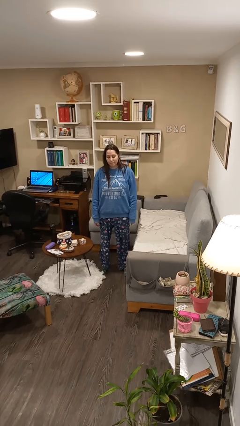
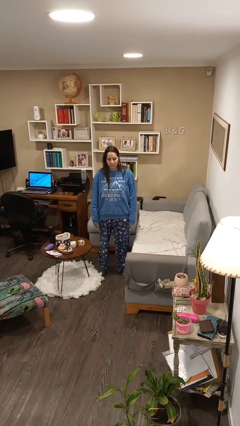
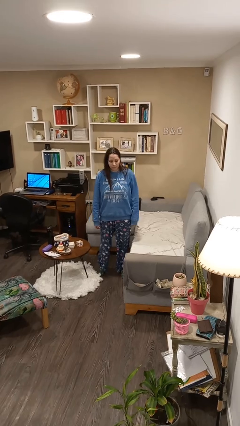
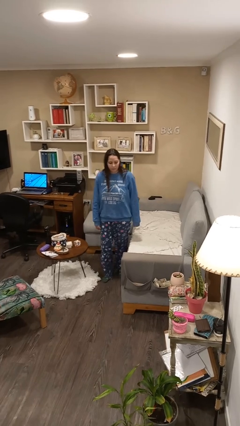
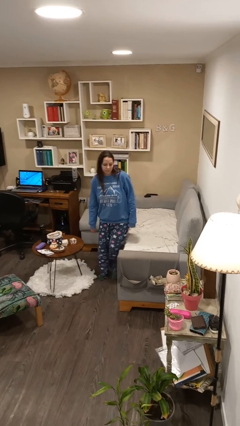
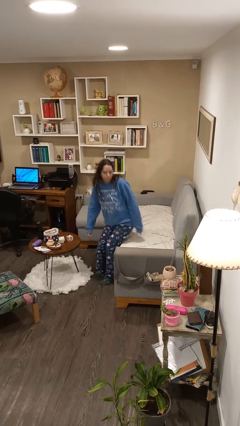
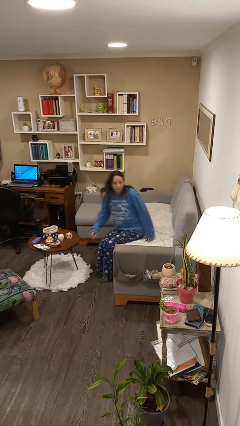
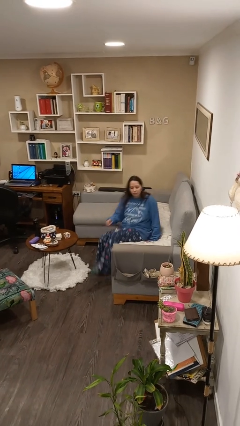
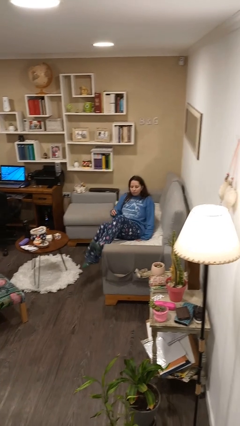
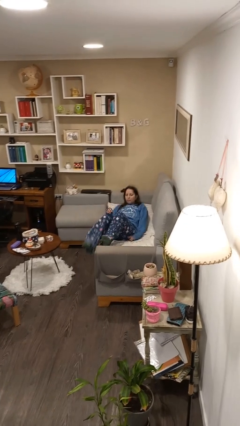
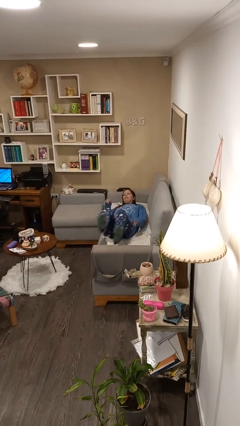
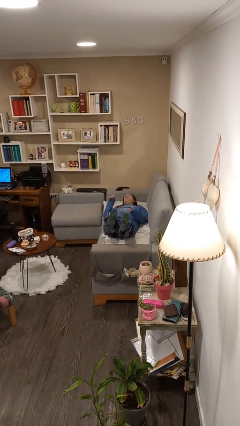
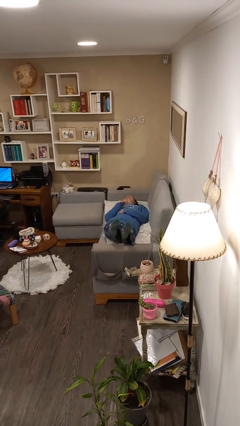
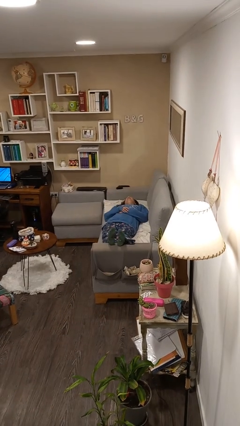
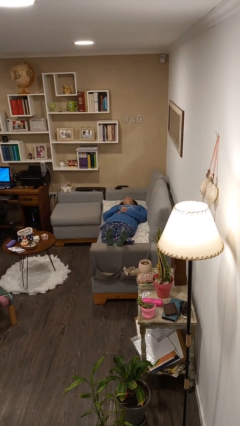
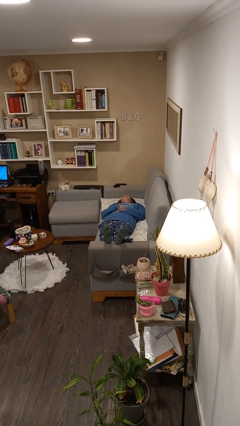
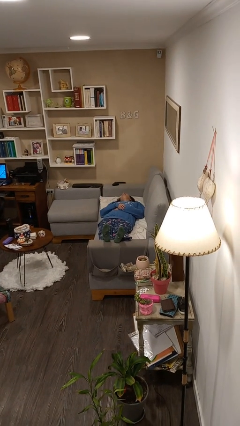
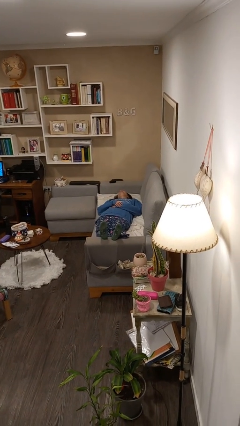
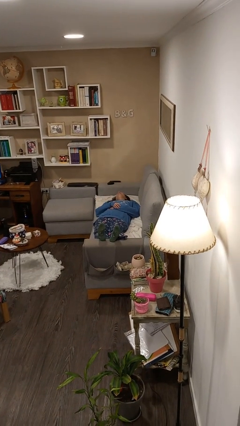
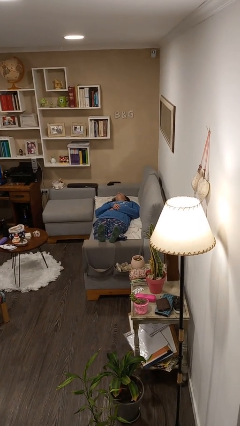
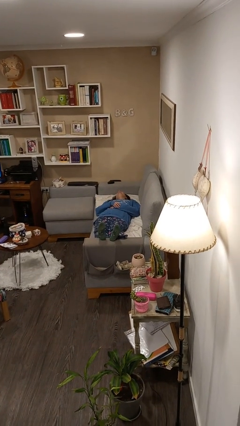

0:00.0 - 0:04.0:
person lies down on couch

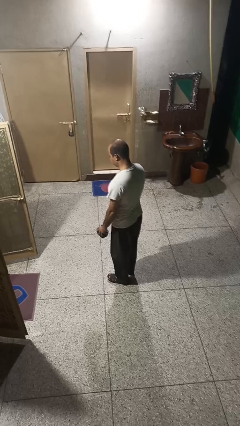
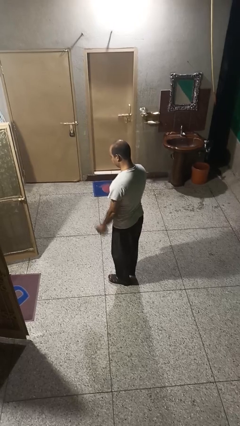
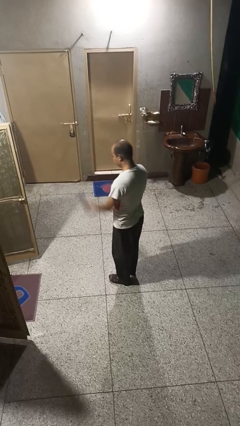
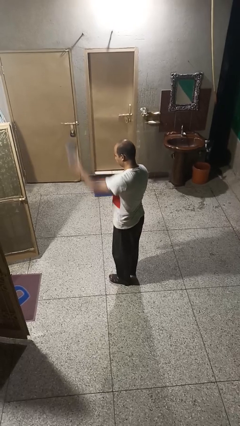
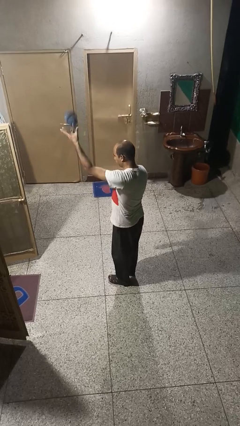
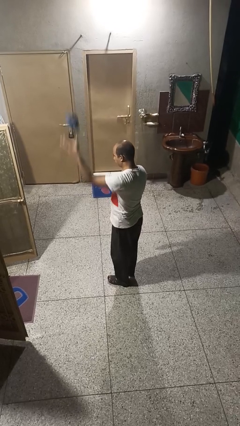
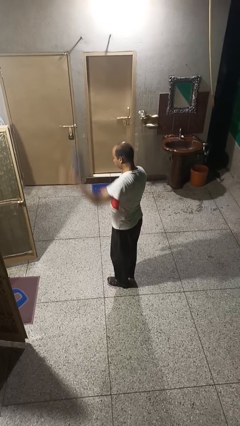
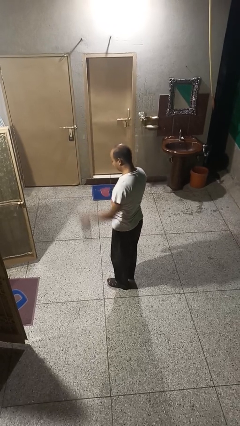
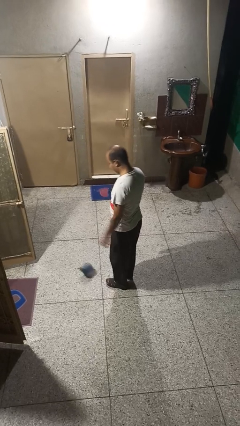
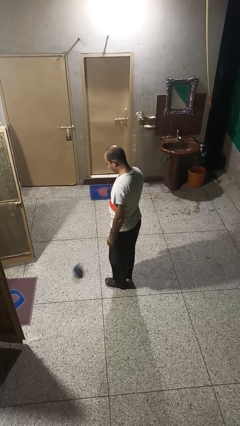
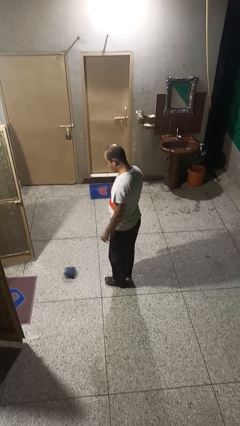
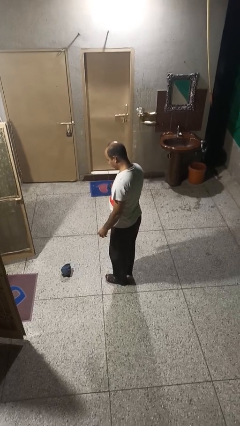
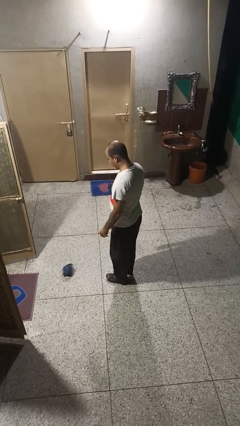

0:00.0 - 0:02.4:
person throws object into air

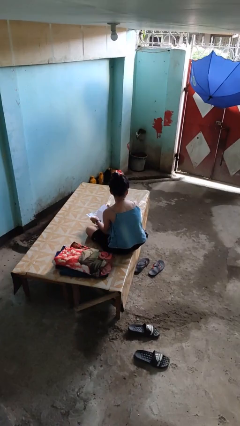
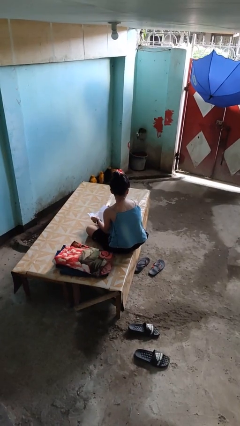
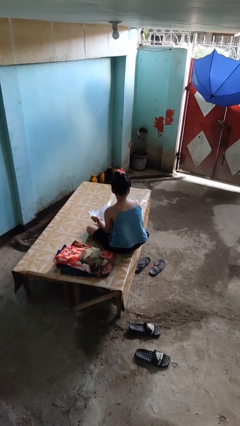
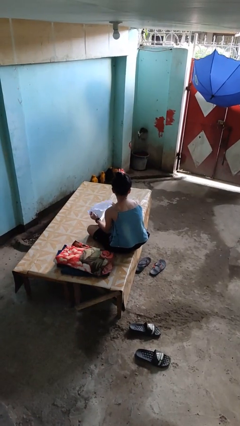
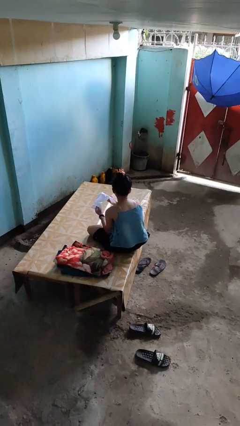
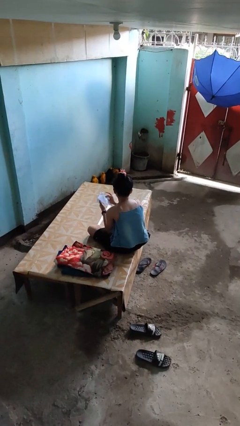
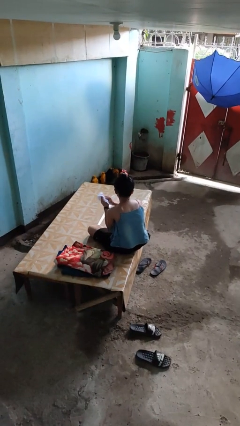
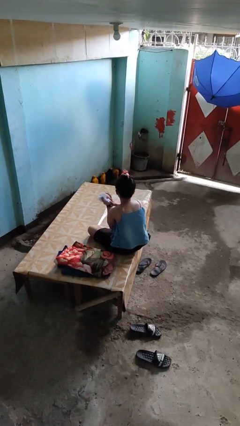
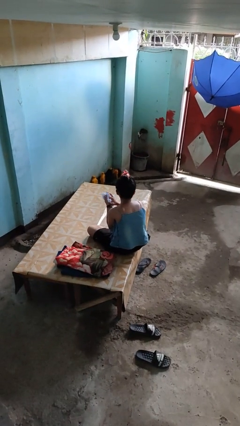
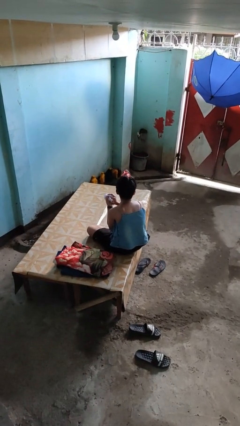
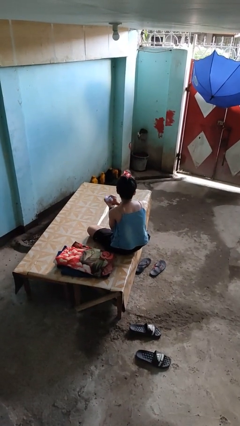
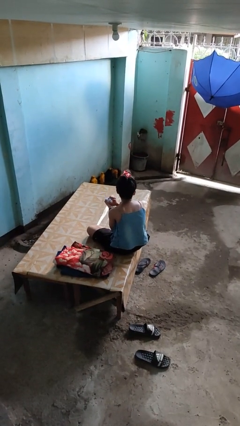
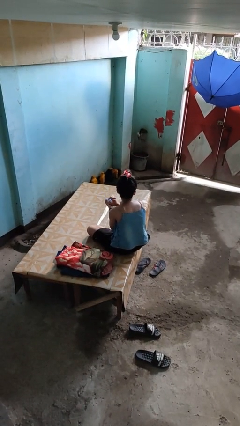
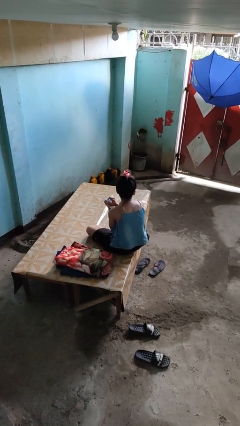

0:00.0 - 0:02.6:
person crumples paper

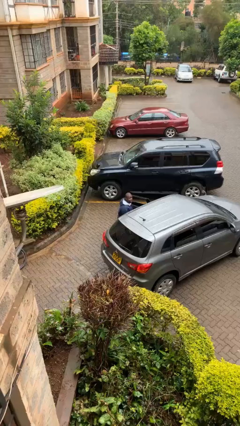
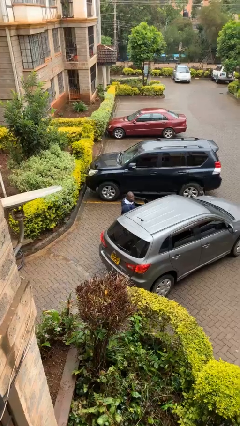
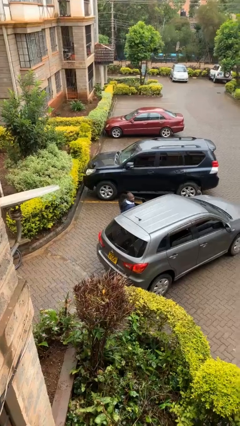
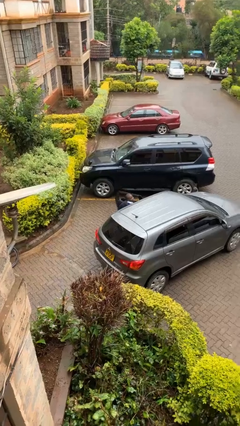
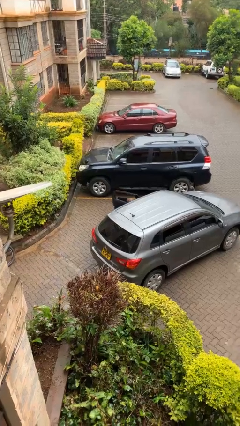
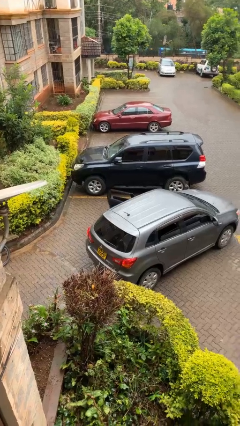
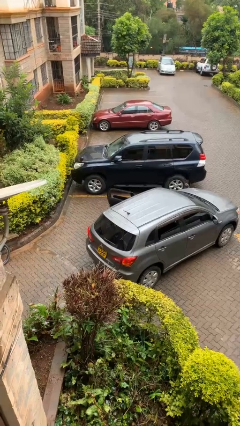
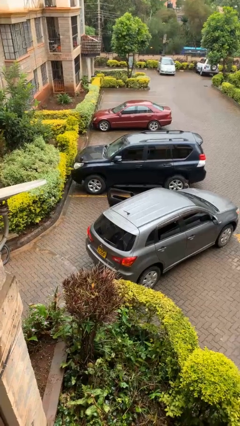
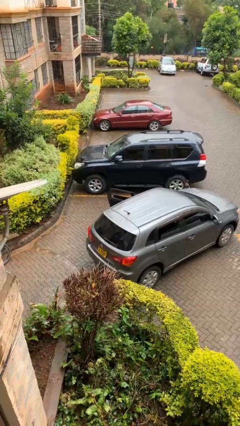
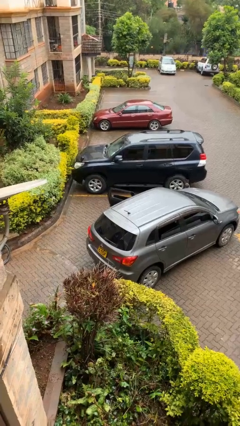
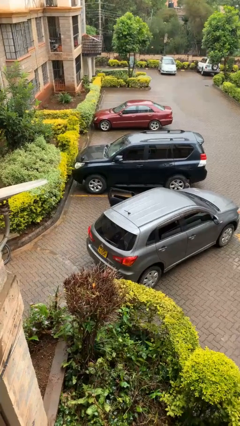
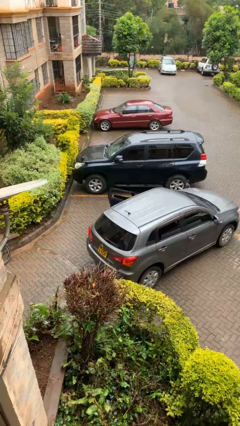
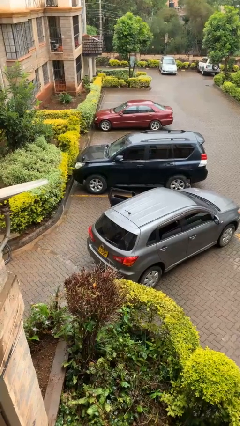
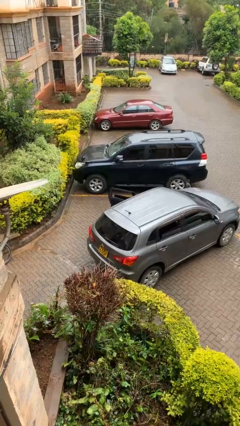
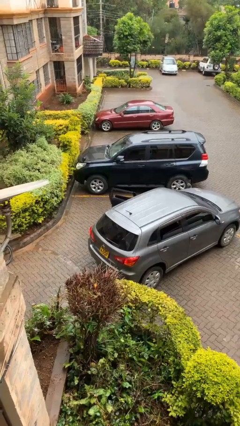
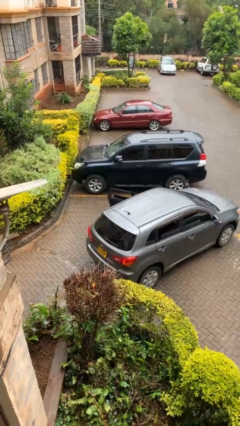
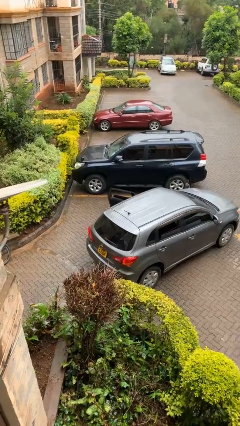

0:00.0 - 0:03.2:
person enters car

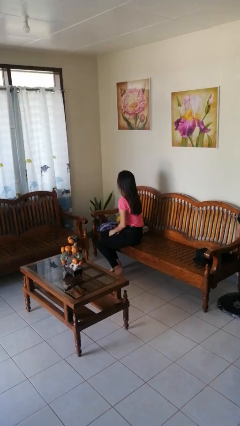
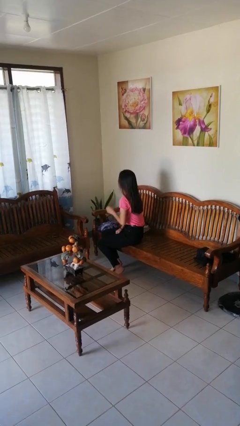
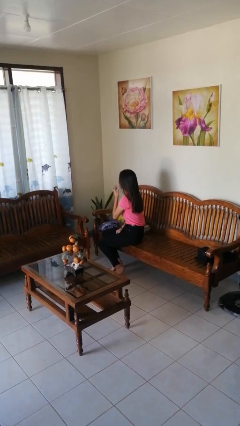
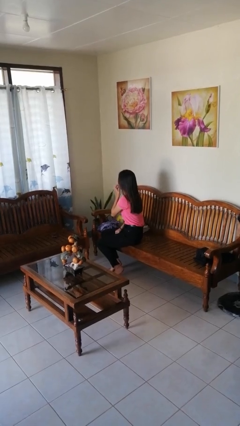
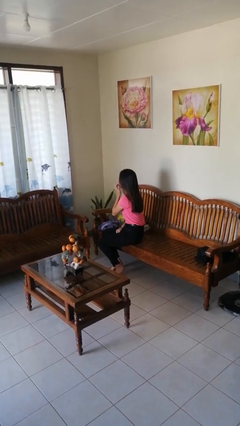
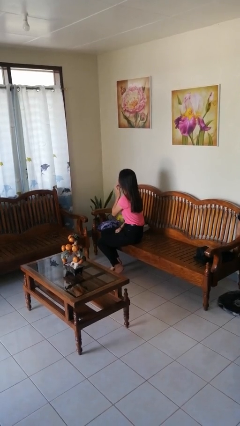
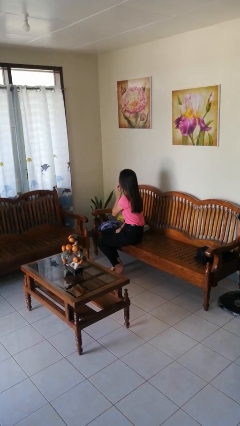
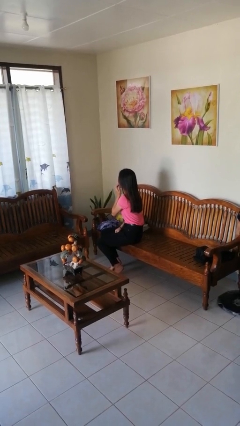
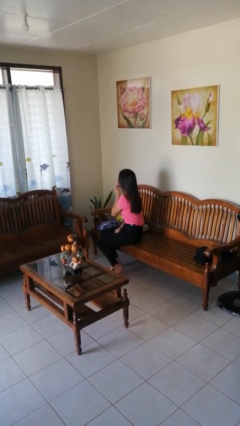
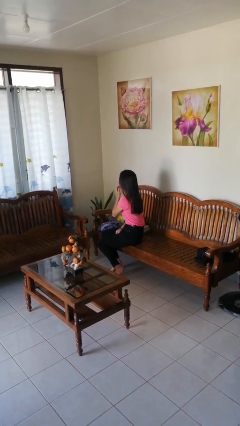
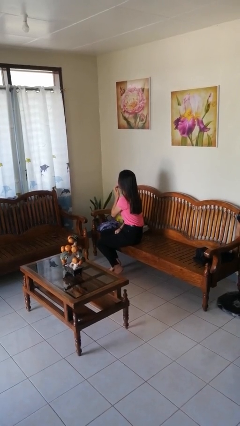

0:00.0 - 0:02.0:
person licks fingers

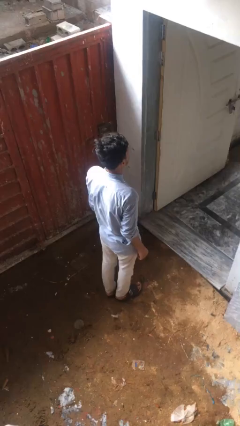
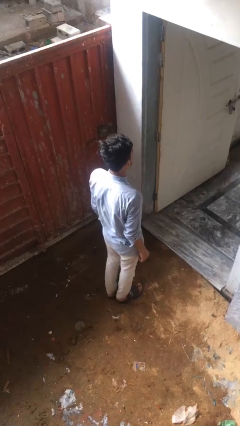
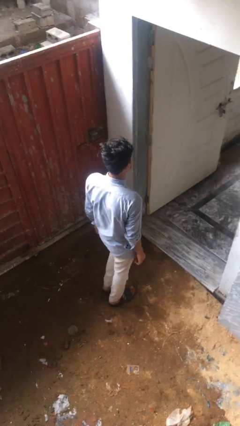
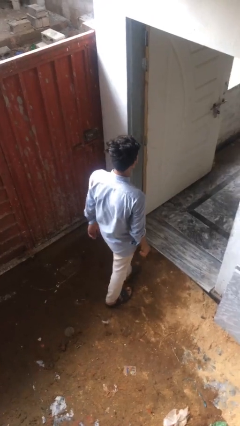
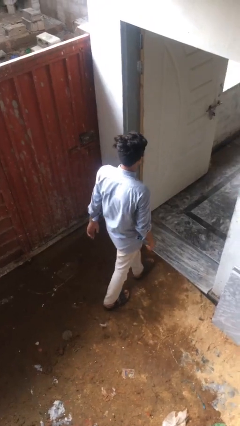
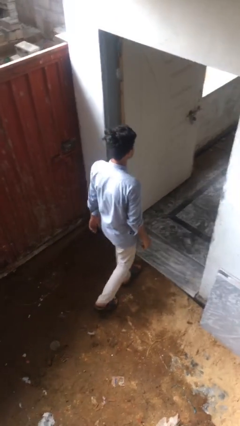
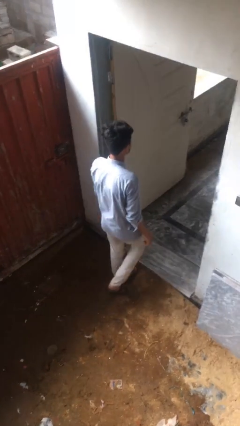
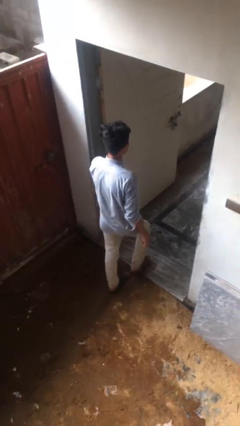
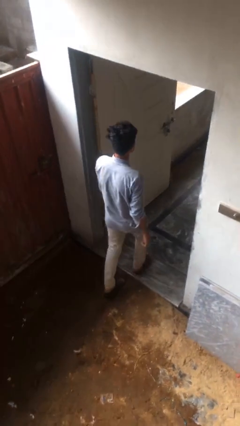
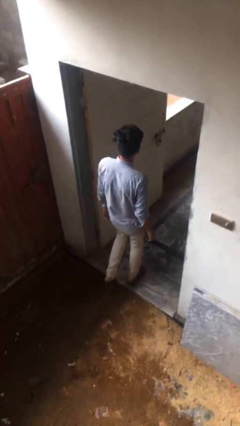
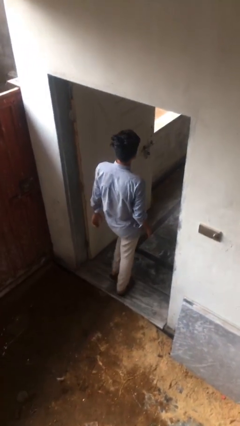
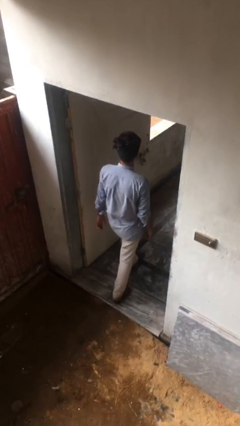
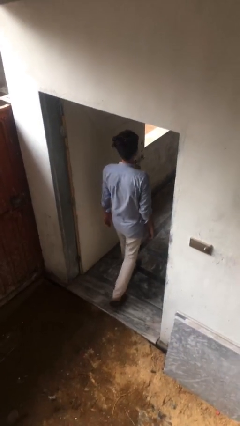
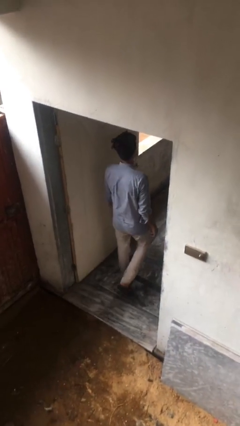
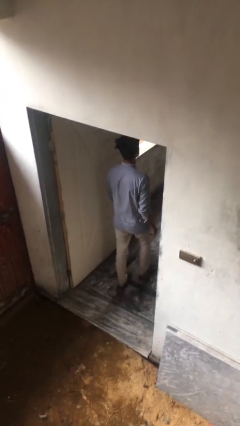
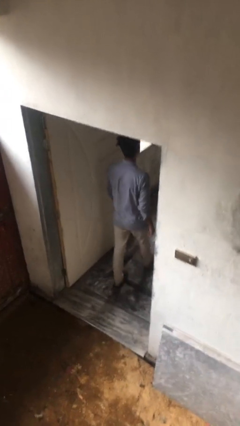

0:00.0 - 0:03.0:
person exits scene through structure

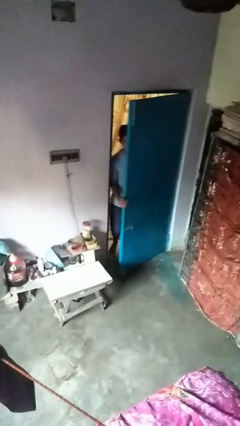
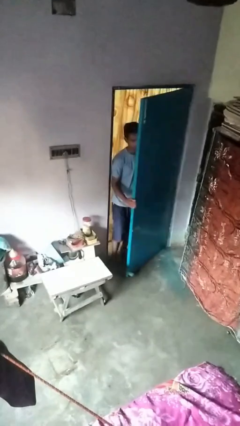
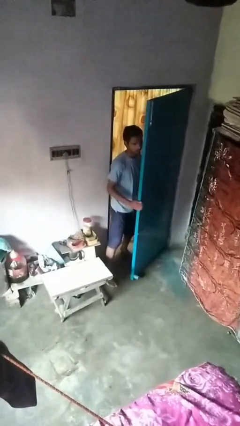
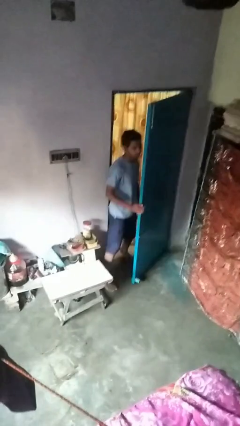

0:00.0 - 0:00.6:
person opens facility door
